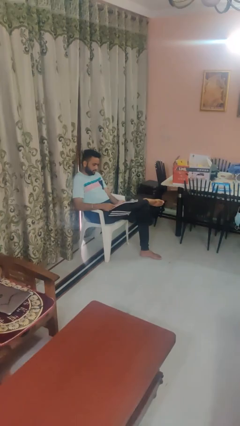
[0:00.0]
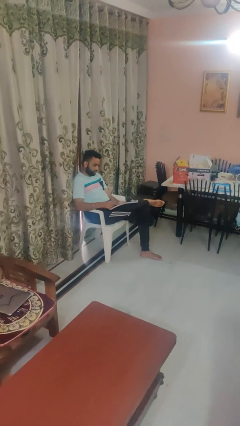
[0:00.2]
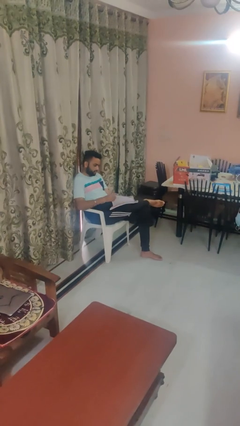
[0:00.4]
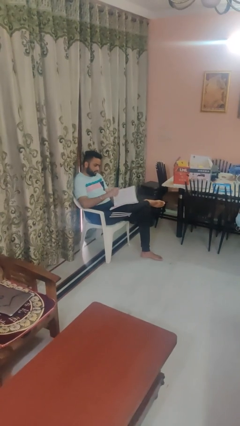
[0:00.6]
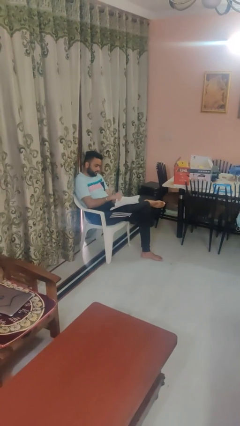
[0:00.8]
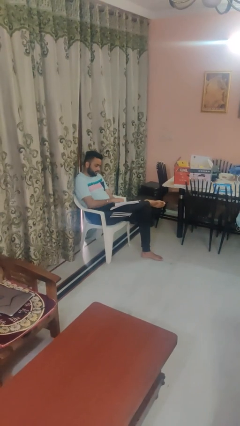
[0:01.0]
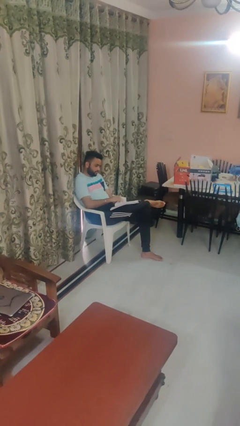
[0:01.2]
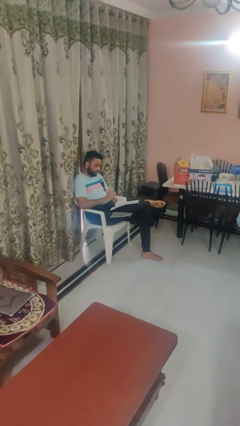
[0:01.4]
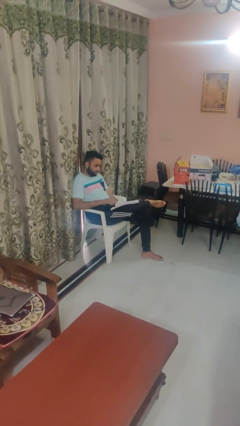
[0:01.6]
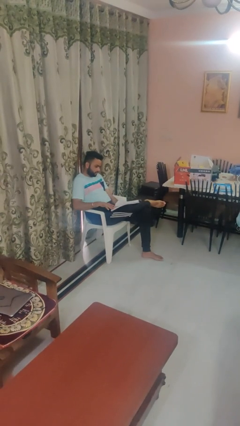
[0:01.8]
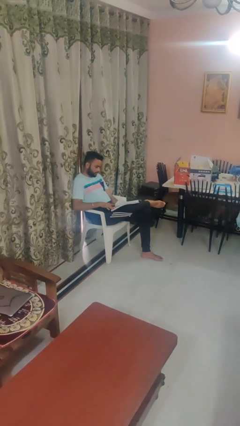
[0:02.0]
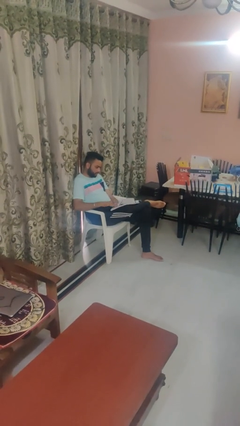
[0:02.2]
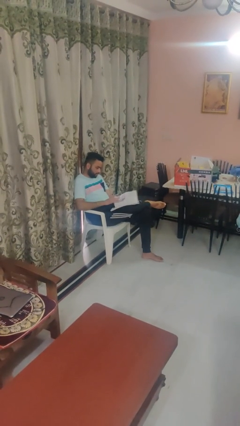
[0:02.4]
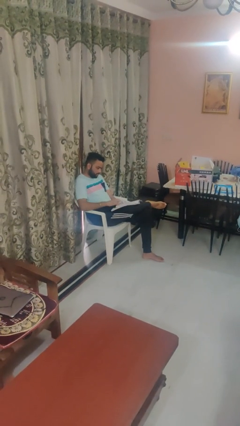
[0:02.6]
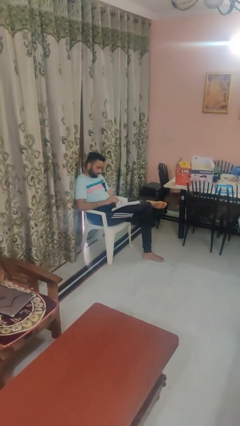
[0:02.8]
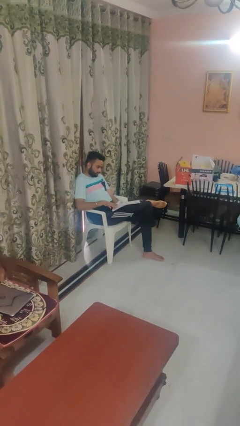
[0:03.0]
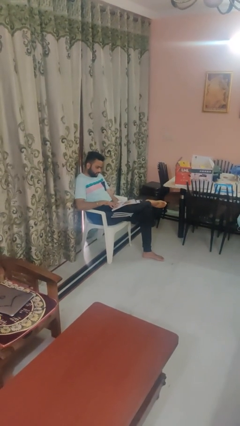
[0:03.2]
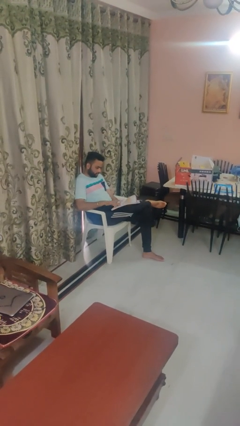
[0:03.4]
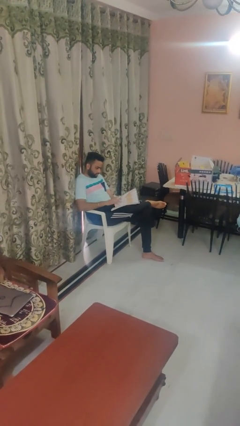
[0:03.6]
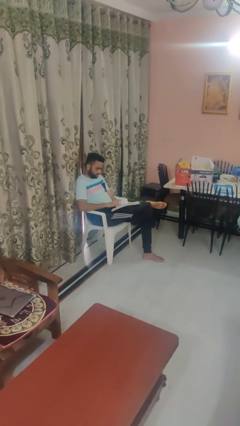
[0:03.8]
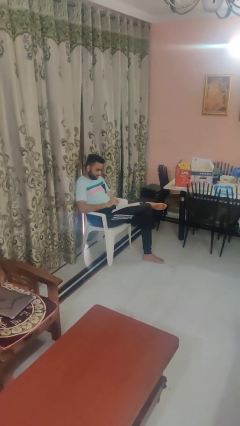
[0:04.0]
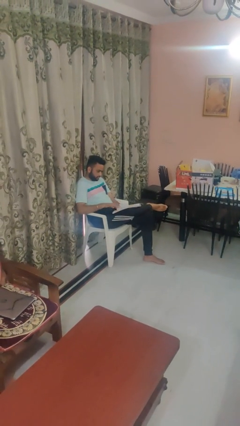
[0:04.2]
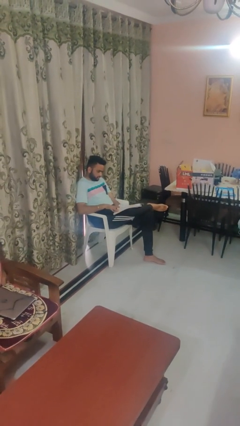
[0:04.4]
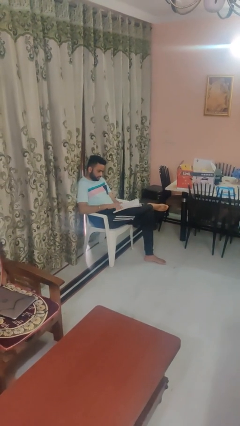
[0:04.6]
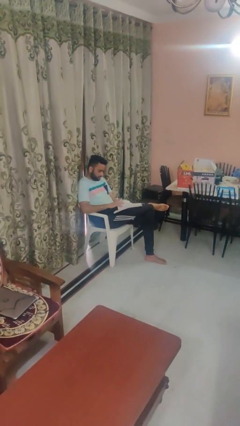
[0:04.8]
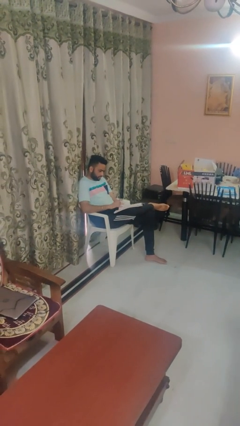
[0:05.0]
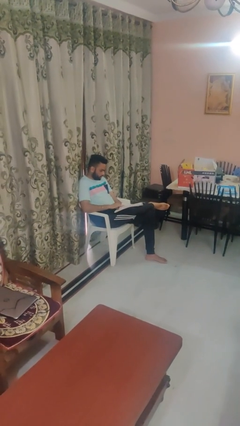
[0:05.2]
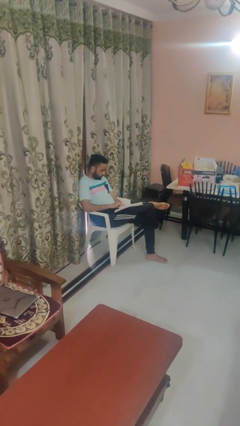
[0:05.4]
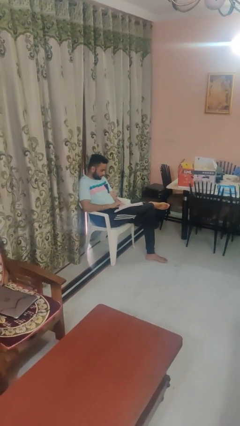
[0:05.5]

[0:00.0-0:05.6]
person reads magazine

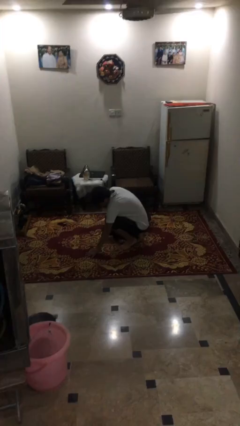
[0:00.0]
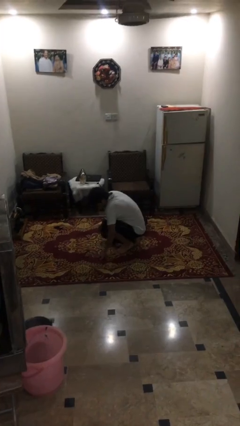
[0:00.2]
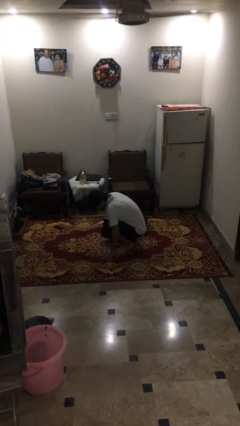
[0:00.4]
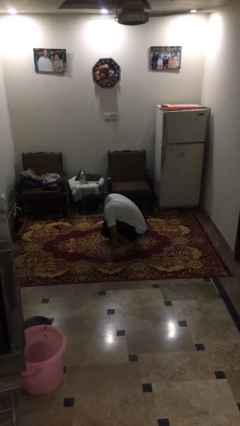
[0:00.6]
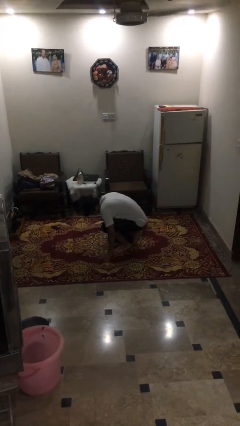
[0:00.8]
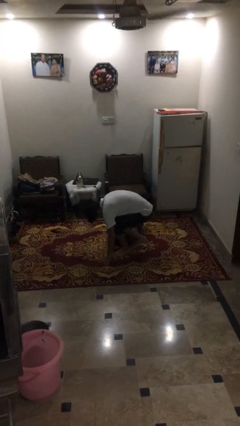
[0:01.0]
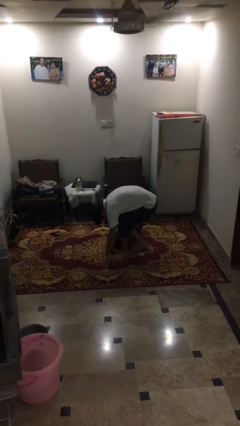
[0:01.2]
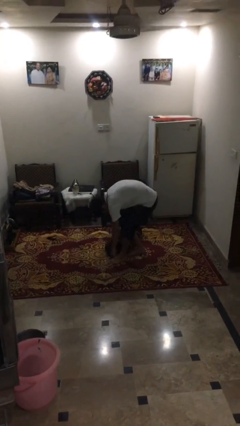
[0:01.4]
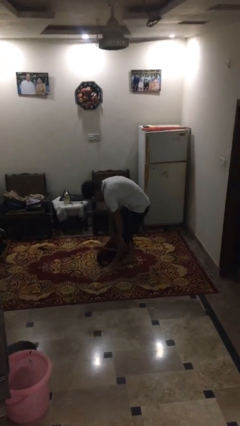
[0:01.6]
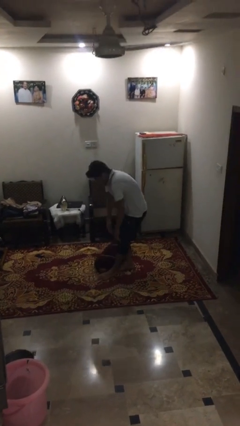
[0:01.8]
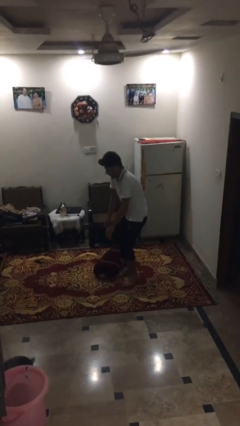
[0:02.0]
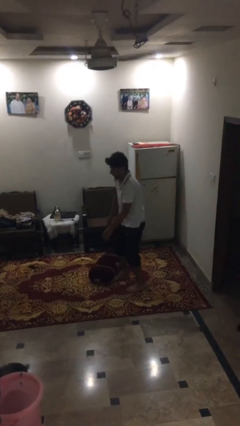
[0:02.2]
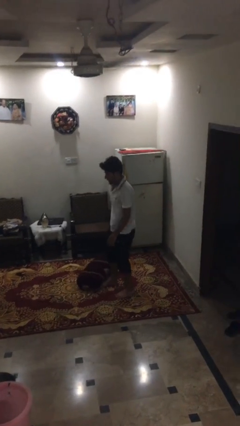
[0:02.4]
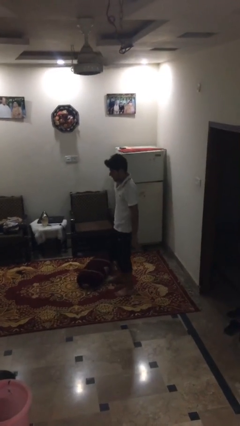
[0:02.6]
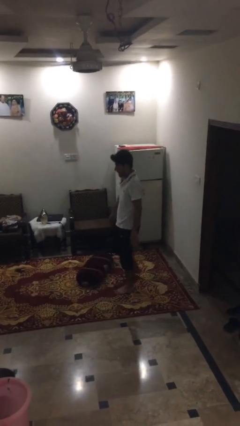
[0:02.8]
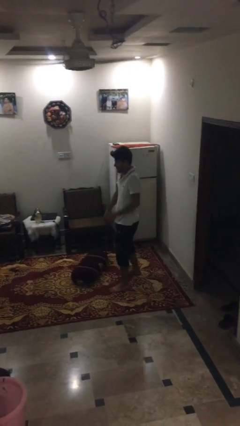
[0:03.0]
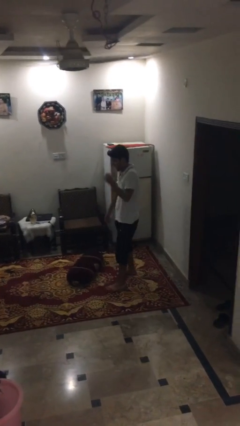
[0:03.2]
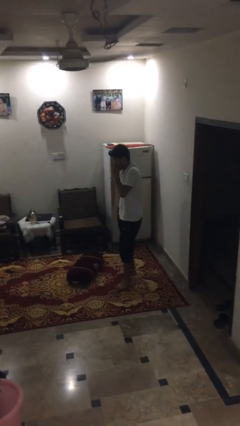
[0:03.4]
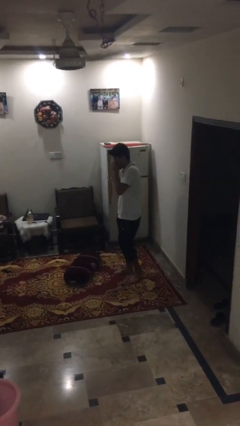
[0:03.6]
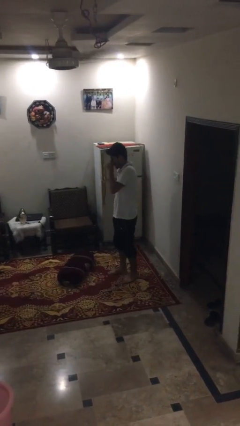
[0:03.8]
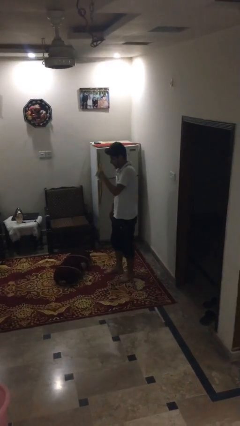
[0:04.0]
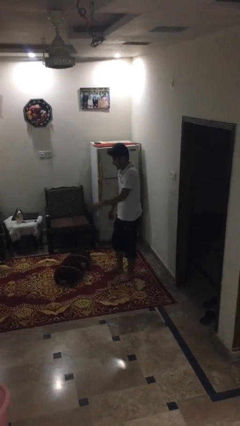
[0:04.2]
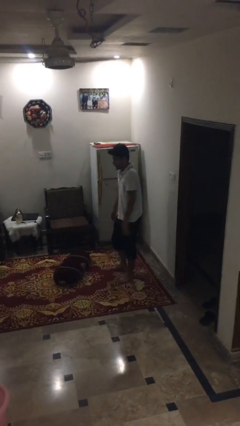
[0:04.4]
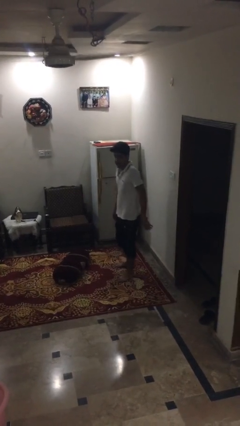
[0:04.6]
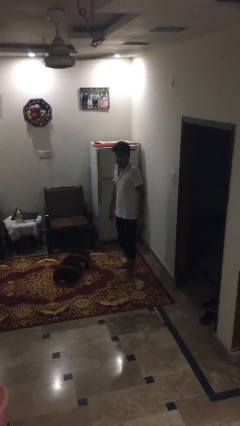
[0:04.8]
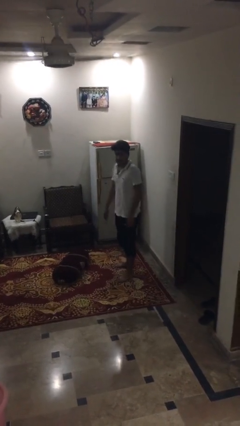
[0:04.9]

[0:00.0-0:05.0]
person stands up from floor

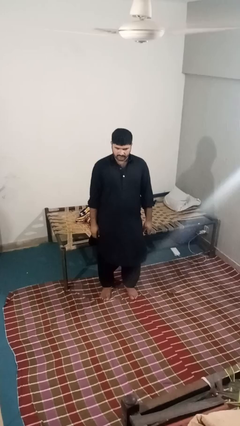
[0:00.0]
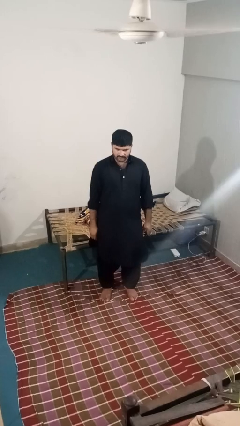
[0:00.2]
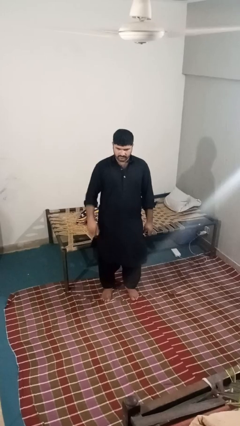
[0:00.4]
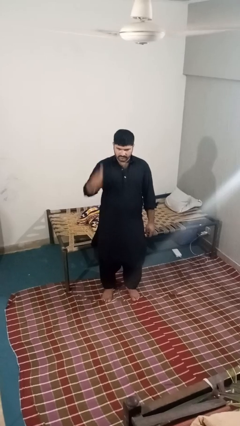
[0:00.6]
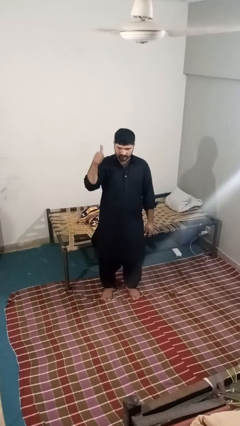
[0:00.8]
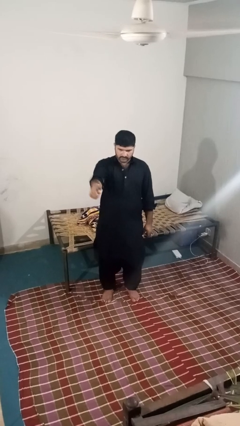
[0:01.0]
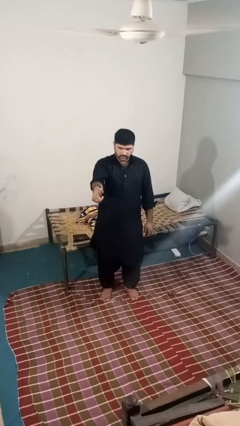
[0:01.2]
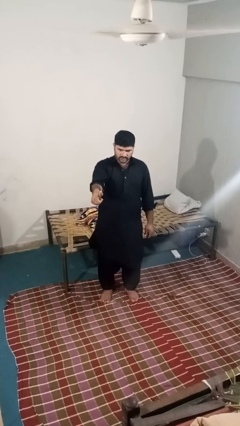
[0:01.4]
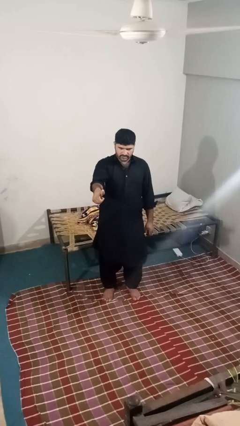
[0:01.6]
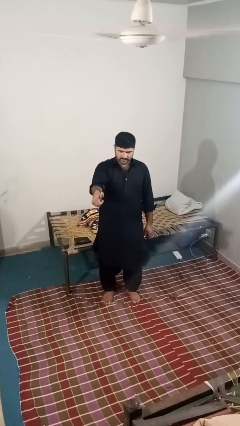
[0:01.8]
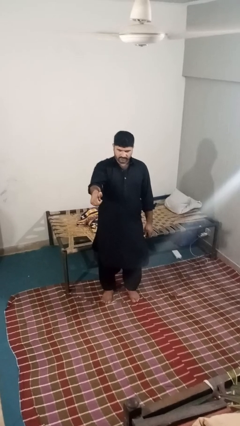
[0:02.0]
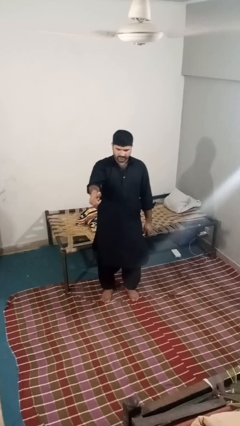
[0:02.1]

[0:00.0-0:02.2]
person gestures thumbs up

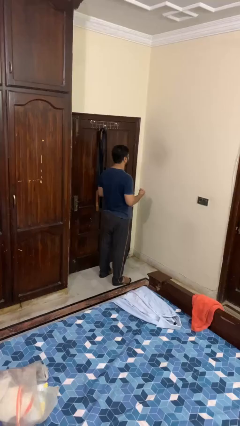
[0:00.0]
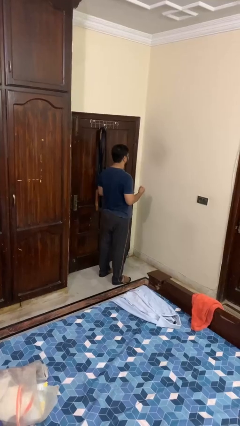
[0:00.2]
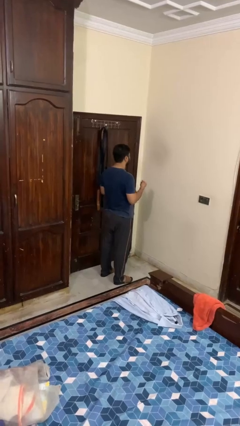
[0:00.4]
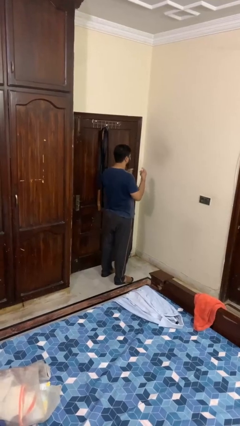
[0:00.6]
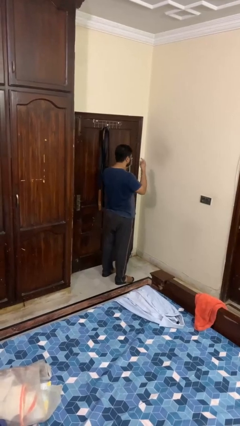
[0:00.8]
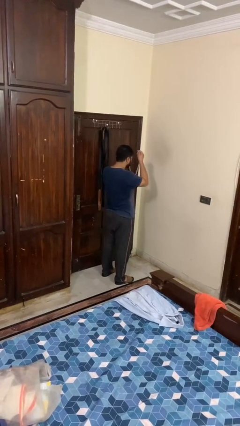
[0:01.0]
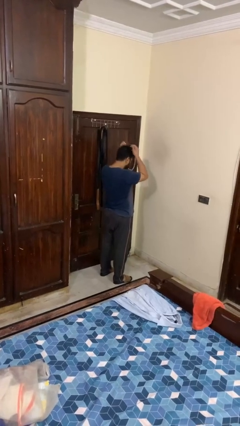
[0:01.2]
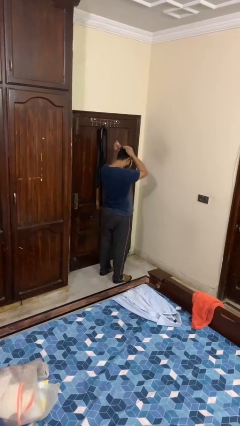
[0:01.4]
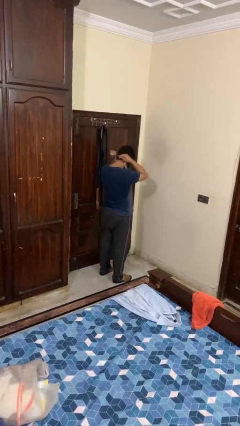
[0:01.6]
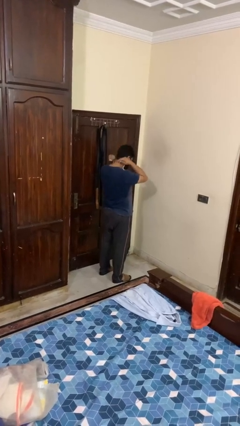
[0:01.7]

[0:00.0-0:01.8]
person puts on necklace

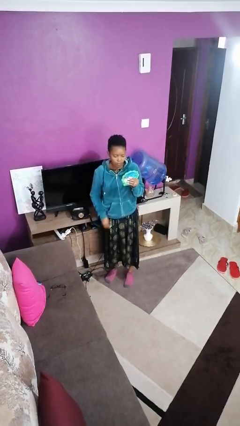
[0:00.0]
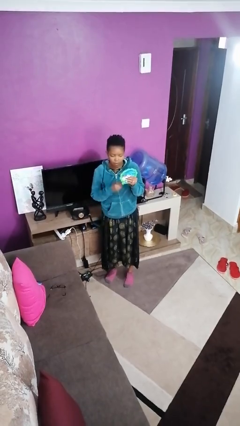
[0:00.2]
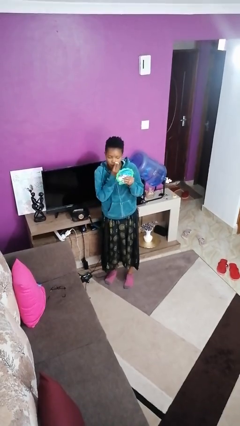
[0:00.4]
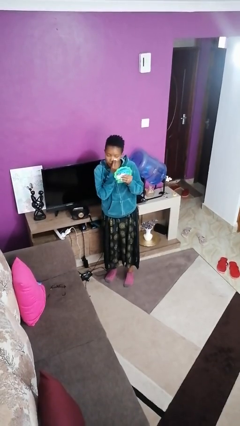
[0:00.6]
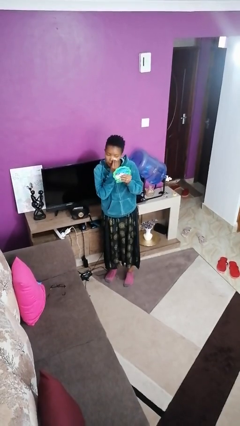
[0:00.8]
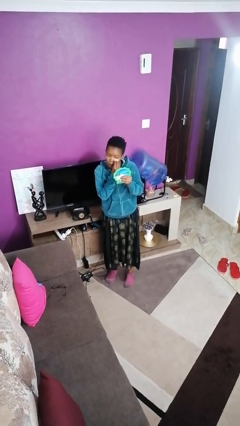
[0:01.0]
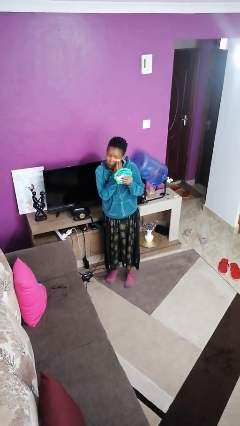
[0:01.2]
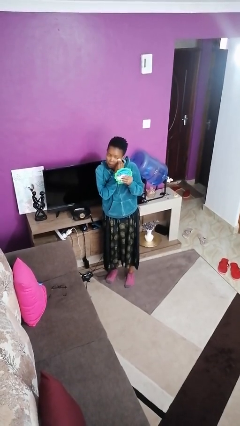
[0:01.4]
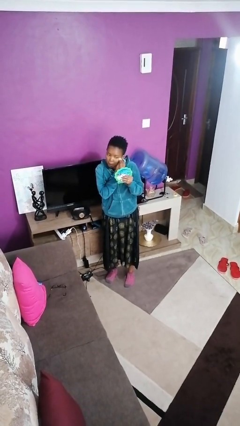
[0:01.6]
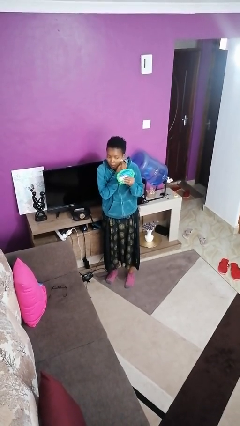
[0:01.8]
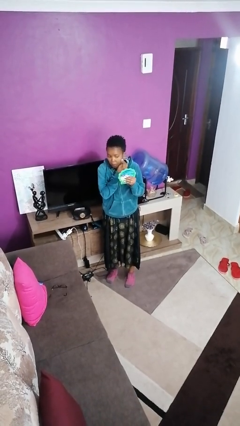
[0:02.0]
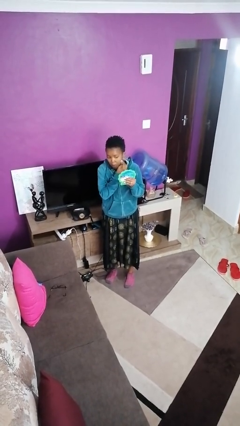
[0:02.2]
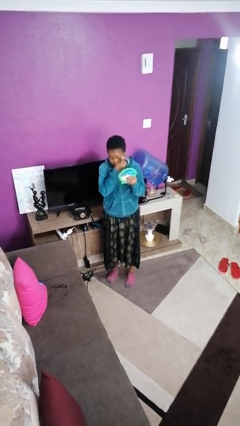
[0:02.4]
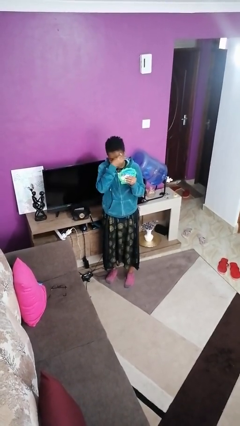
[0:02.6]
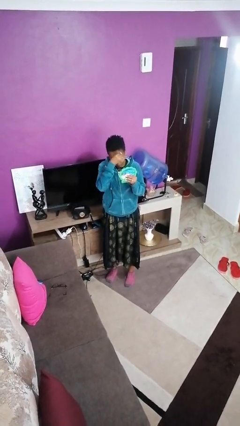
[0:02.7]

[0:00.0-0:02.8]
person applies foundation makeup
